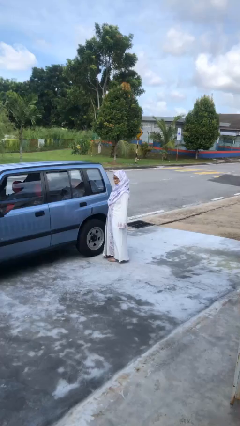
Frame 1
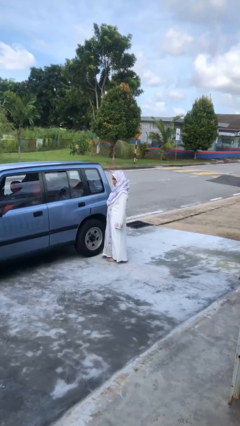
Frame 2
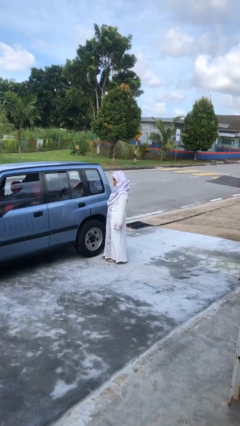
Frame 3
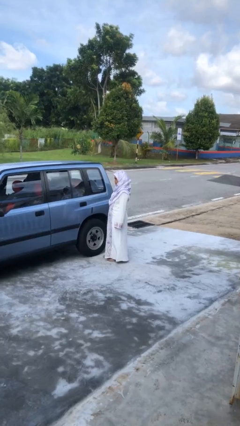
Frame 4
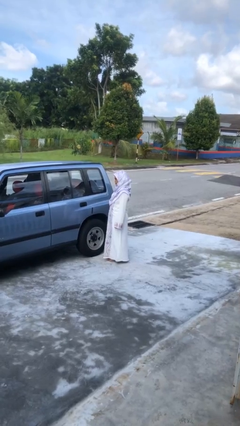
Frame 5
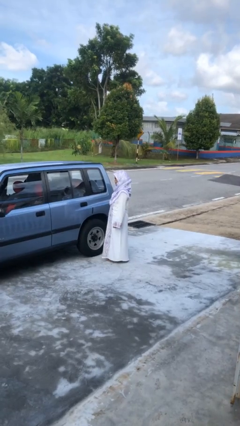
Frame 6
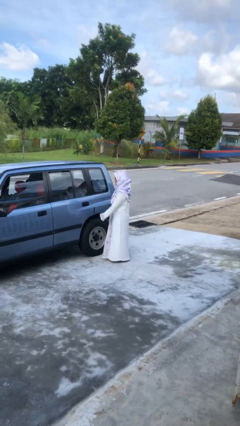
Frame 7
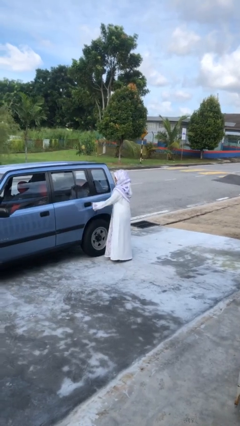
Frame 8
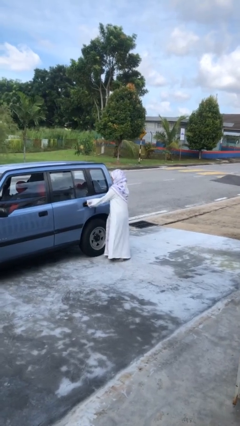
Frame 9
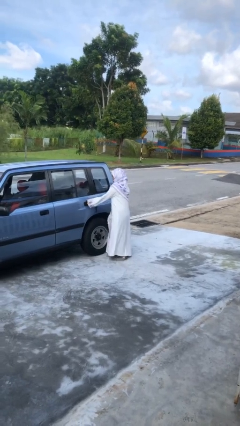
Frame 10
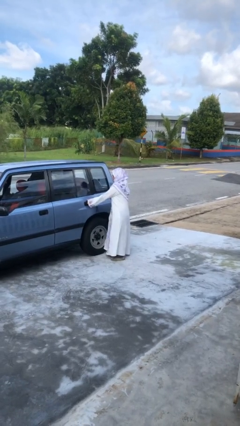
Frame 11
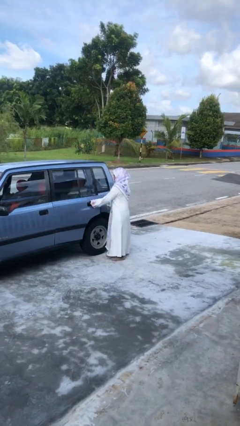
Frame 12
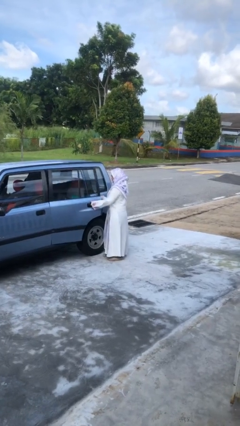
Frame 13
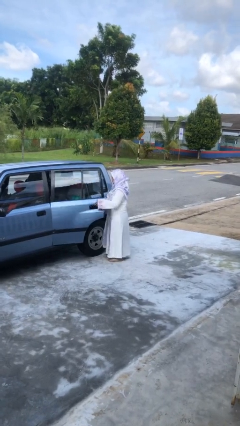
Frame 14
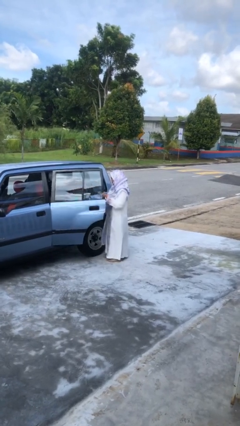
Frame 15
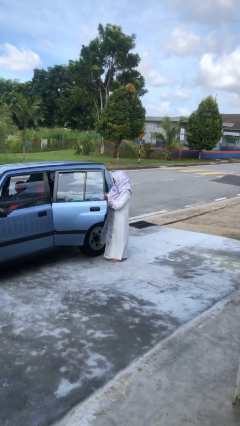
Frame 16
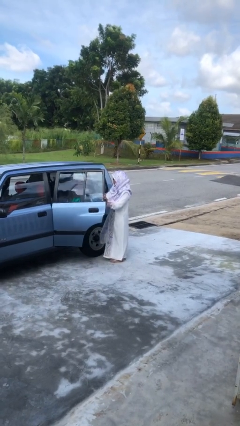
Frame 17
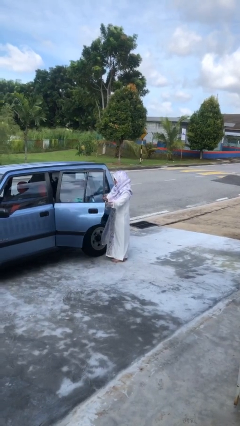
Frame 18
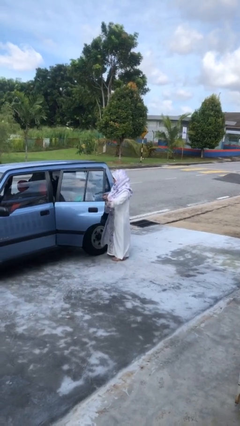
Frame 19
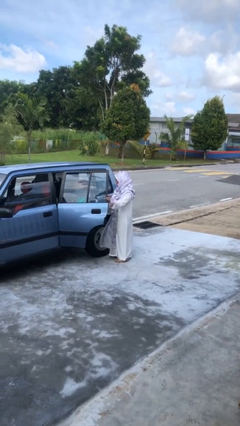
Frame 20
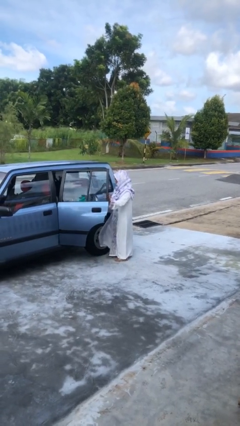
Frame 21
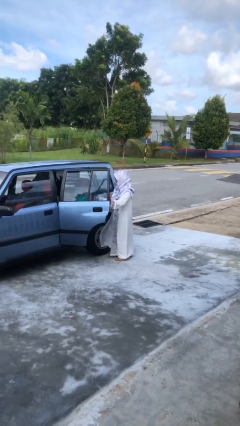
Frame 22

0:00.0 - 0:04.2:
person opens car door

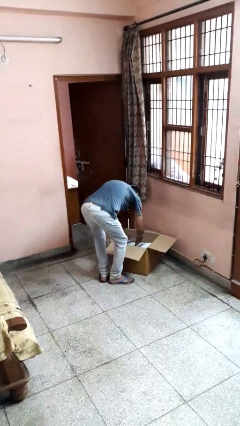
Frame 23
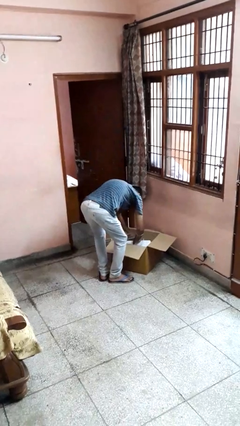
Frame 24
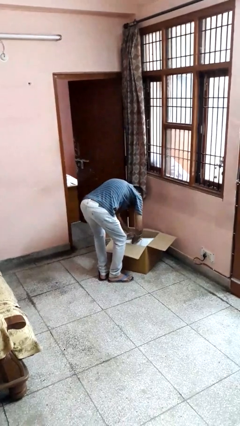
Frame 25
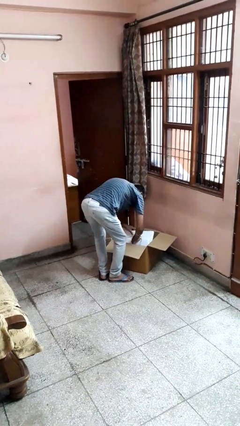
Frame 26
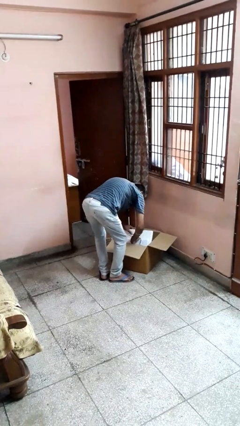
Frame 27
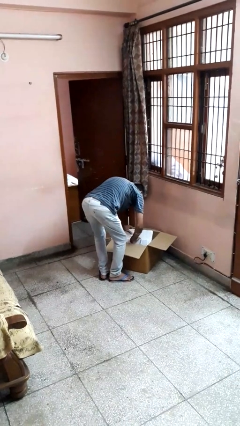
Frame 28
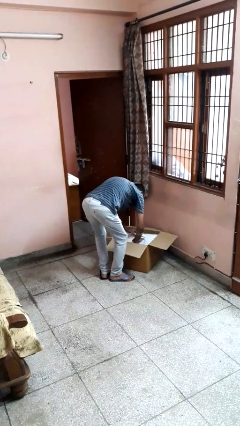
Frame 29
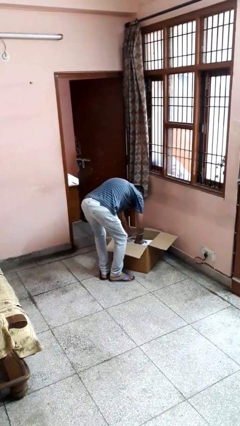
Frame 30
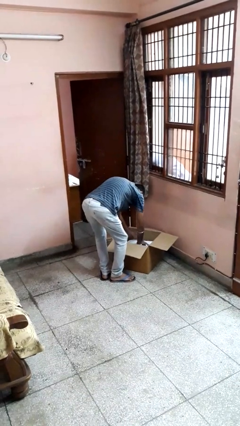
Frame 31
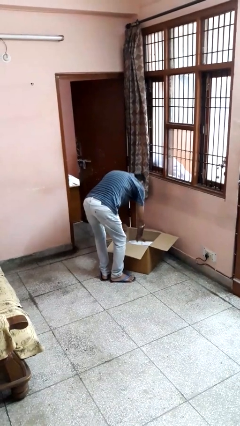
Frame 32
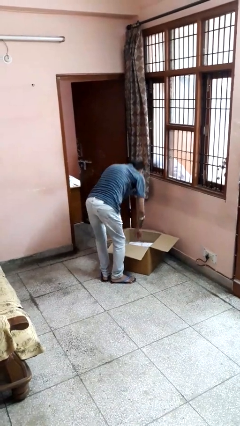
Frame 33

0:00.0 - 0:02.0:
person searches in box

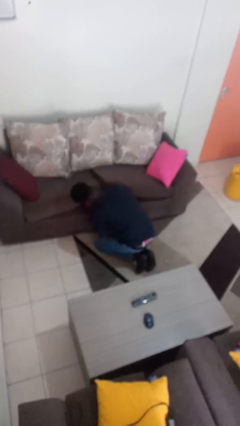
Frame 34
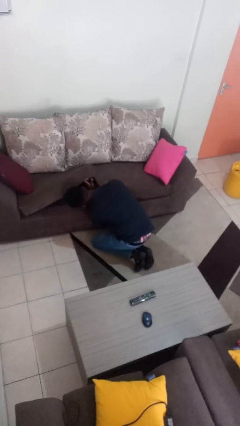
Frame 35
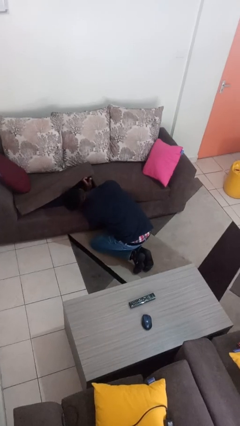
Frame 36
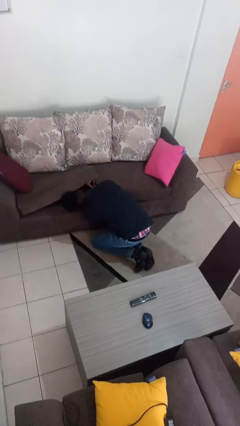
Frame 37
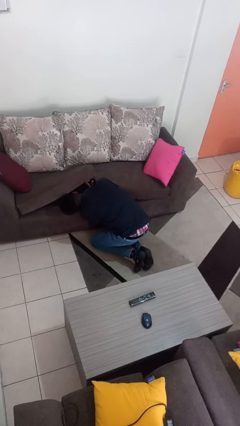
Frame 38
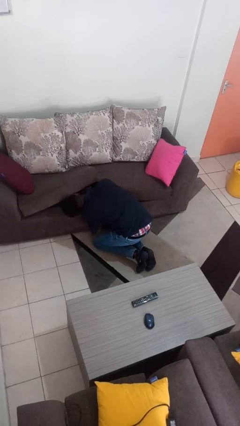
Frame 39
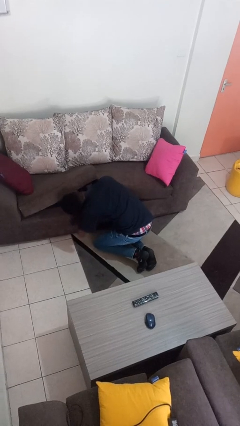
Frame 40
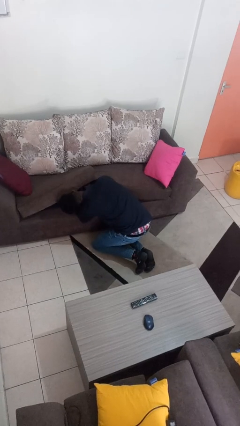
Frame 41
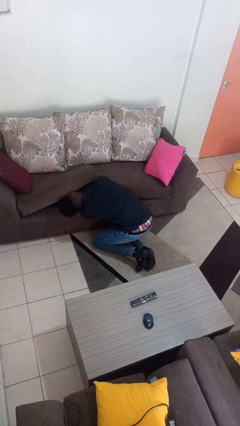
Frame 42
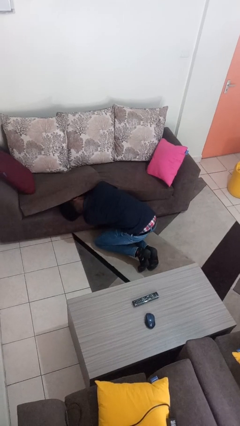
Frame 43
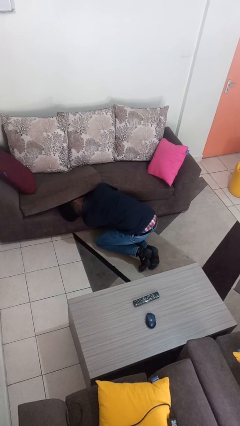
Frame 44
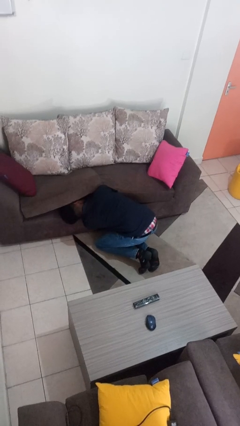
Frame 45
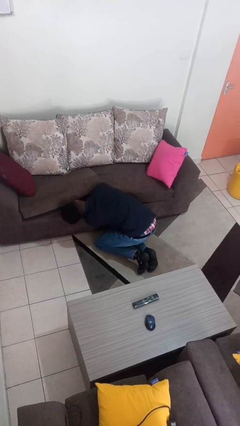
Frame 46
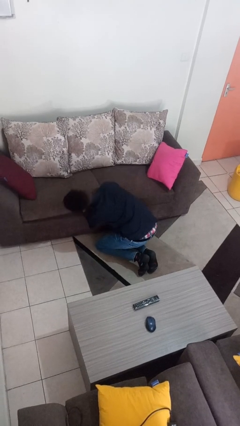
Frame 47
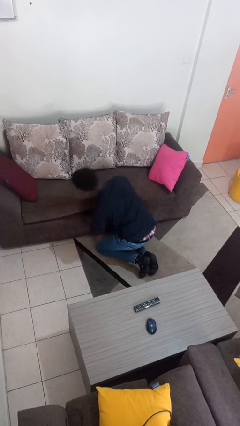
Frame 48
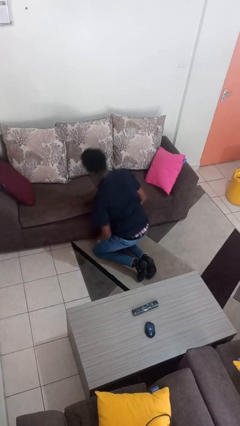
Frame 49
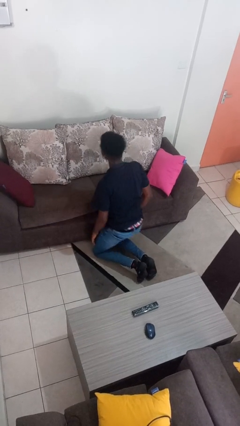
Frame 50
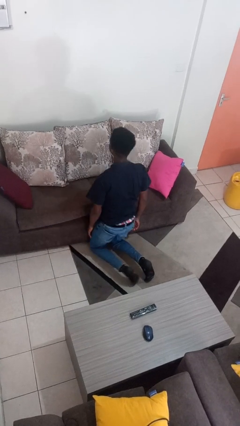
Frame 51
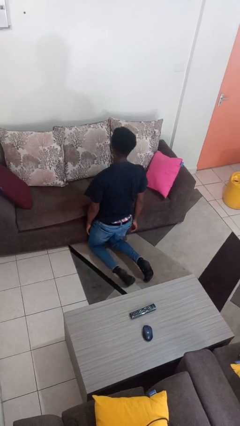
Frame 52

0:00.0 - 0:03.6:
person searches under couch

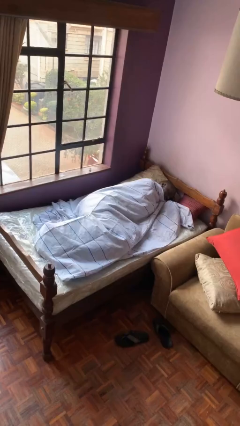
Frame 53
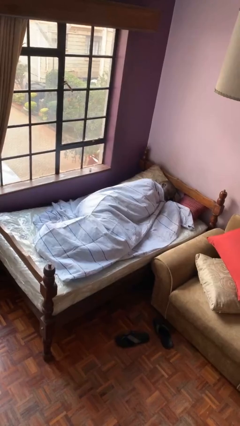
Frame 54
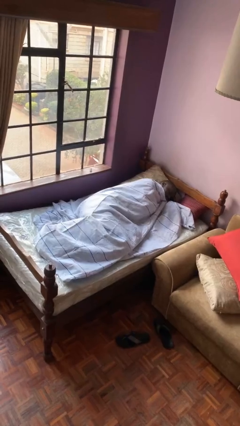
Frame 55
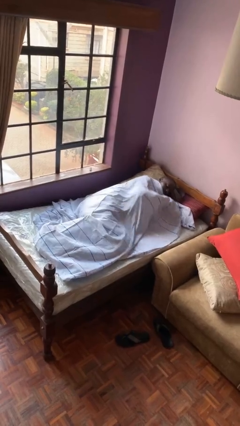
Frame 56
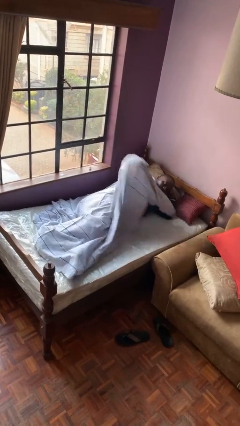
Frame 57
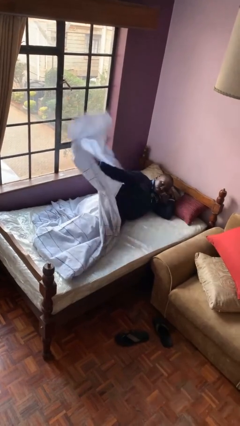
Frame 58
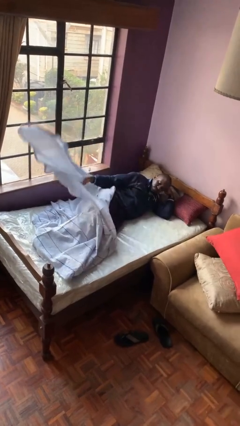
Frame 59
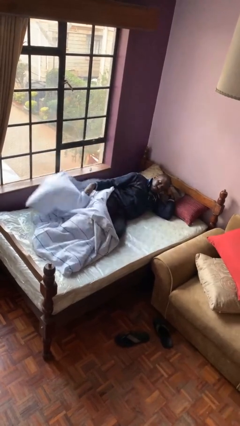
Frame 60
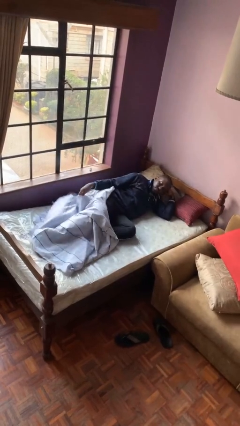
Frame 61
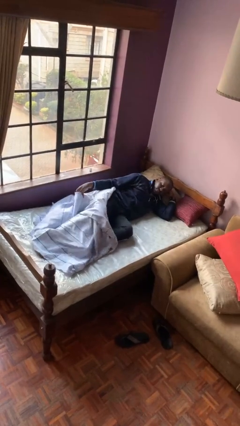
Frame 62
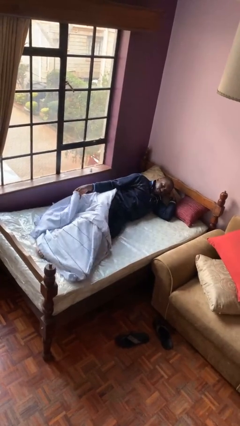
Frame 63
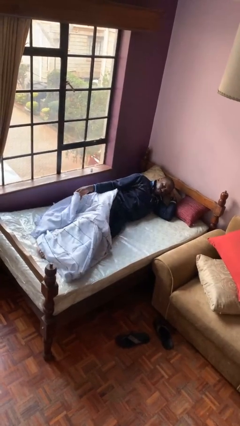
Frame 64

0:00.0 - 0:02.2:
person uncovers with bedsheets

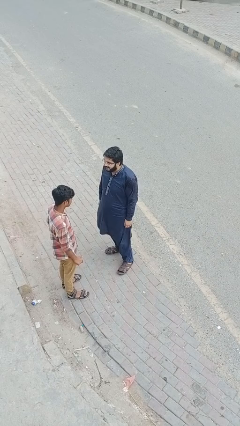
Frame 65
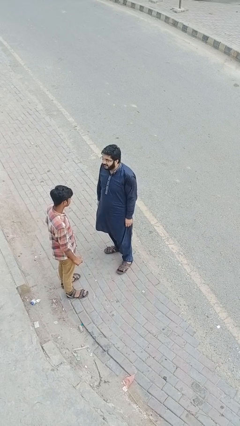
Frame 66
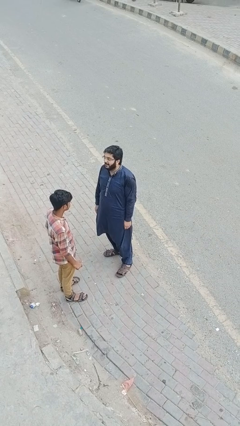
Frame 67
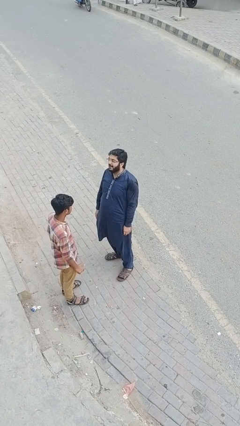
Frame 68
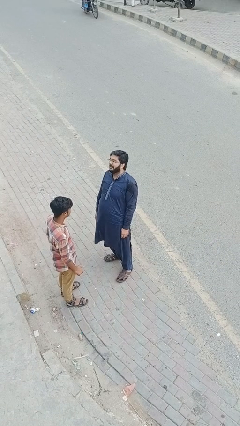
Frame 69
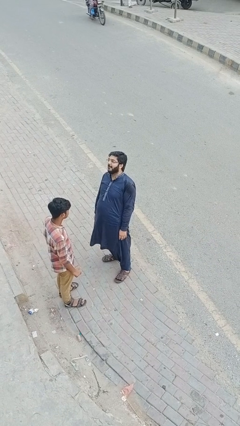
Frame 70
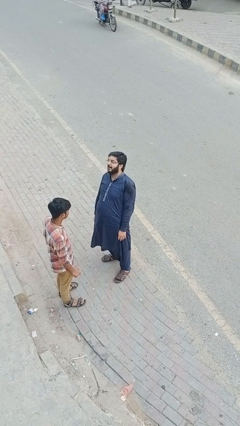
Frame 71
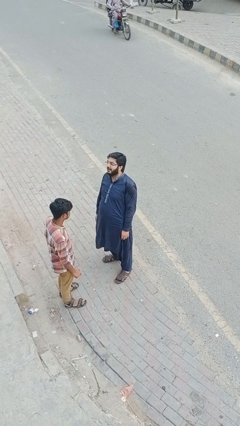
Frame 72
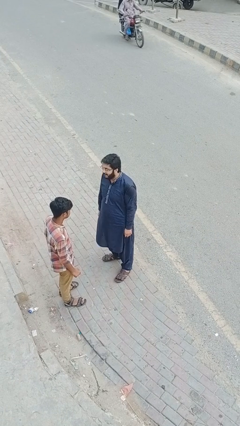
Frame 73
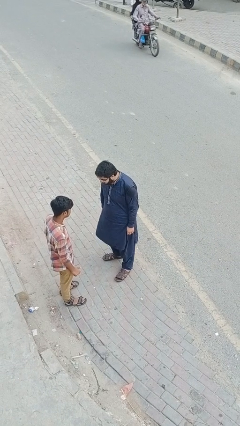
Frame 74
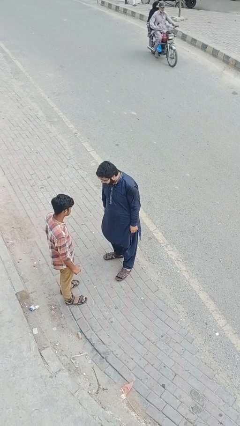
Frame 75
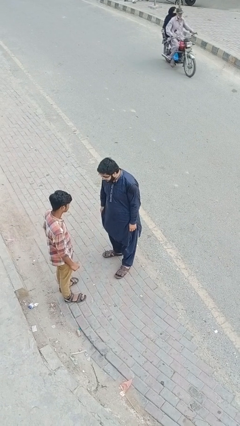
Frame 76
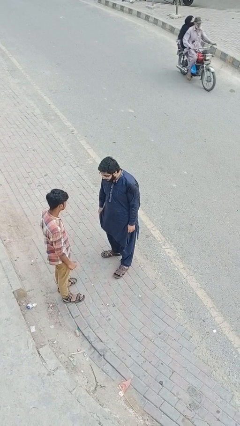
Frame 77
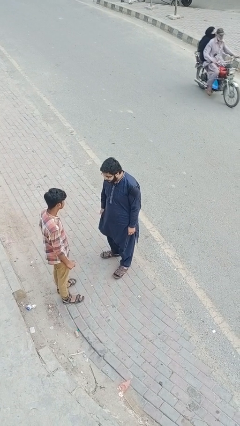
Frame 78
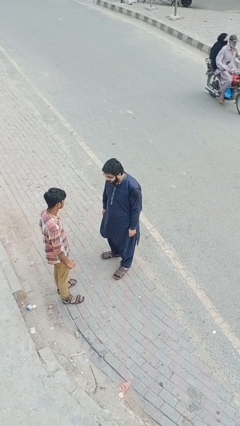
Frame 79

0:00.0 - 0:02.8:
person laughs with person

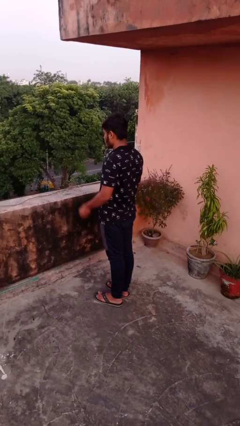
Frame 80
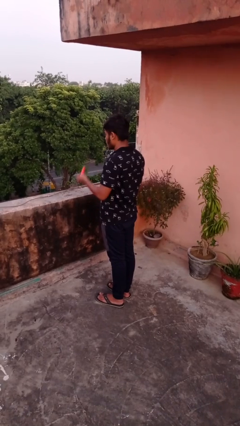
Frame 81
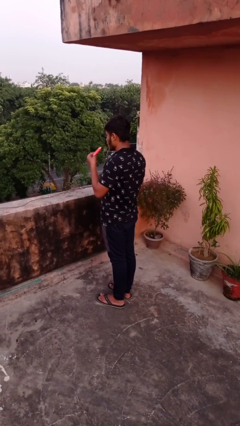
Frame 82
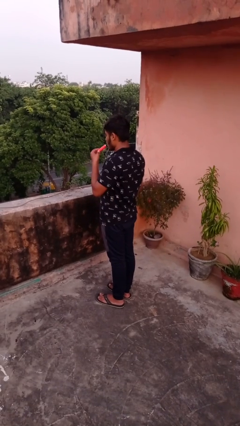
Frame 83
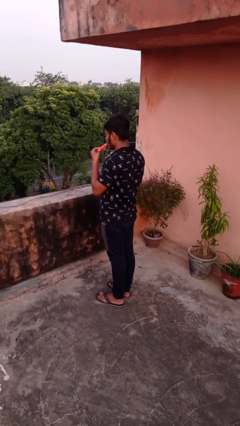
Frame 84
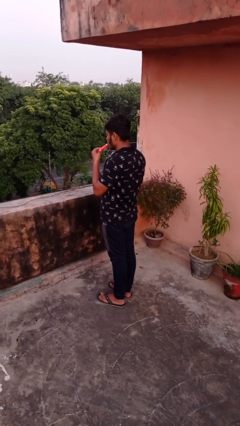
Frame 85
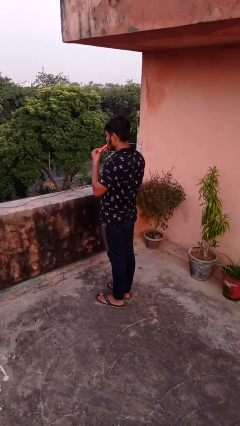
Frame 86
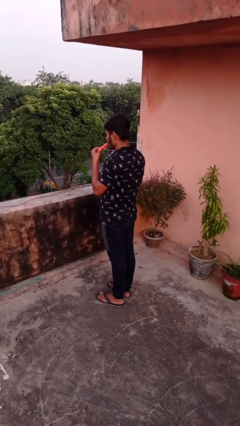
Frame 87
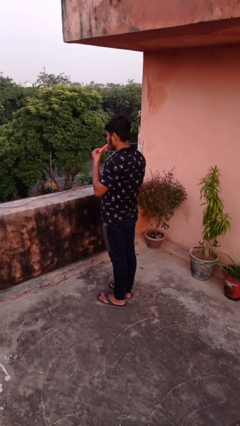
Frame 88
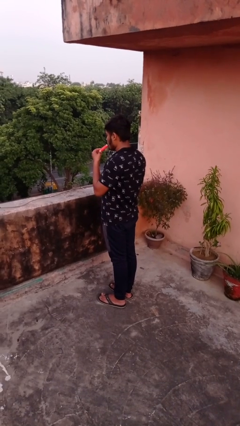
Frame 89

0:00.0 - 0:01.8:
person vapes

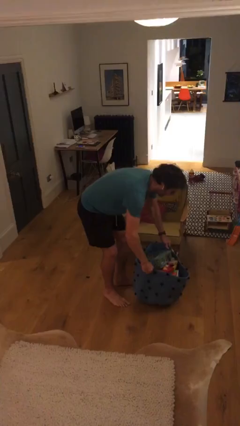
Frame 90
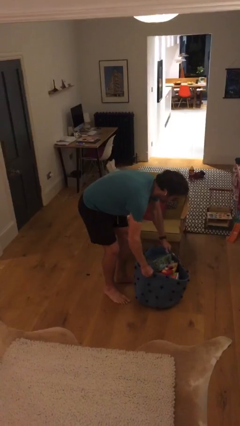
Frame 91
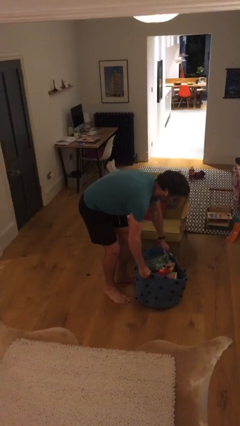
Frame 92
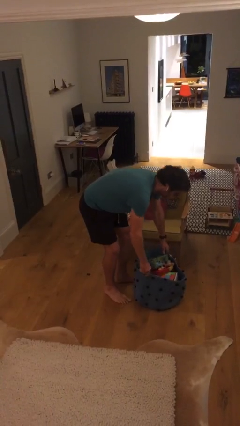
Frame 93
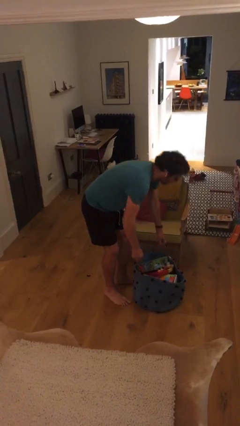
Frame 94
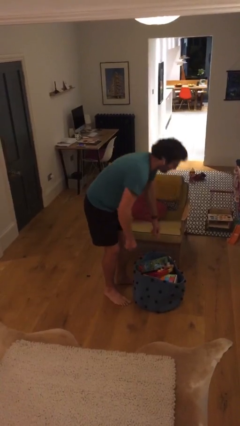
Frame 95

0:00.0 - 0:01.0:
person puts down object on floor
